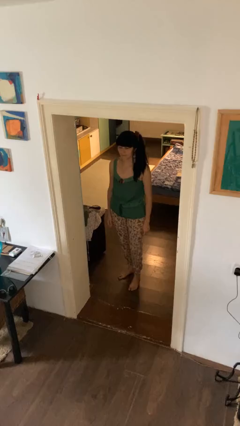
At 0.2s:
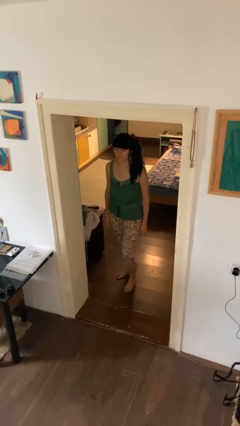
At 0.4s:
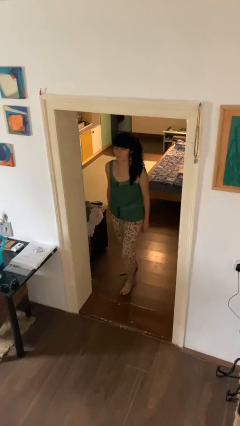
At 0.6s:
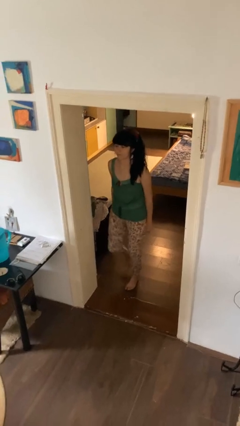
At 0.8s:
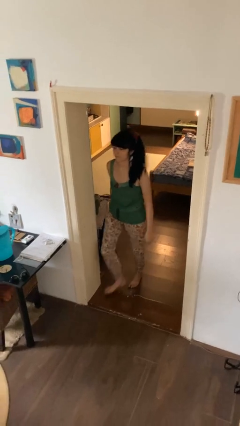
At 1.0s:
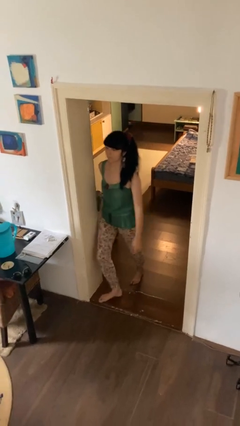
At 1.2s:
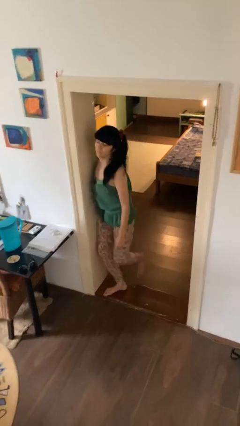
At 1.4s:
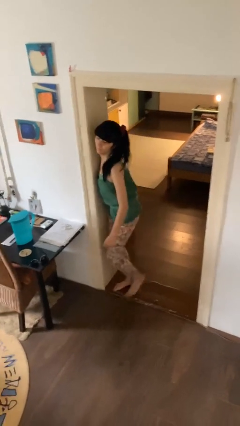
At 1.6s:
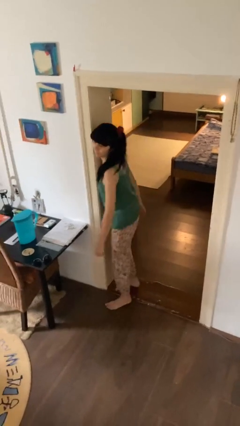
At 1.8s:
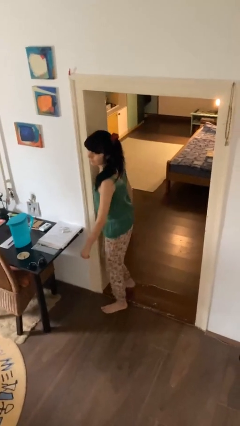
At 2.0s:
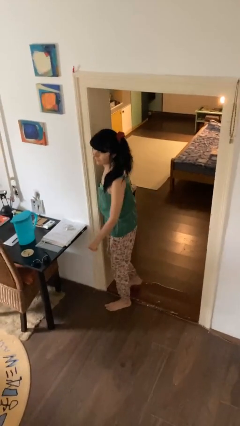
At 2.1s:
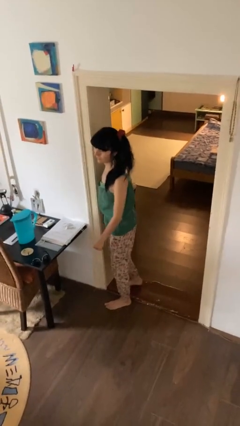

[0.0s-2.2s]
person bumps into wall

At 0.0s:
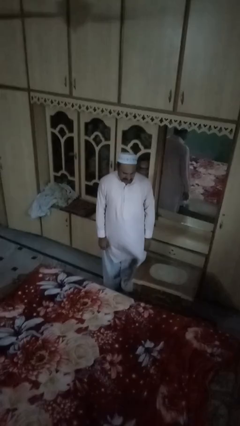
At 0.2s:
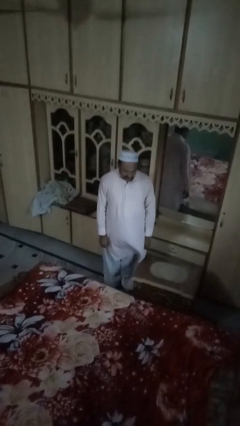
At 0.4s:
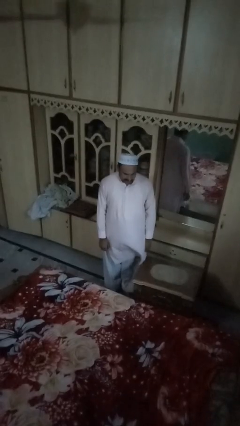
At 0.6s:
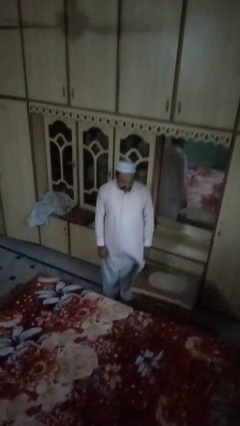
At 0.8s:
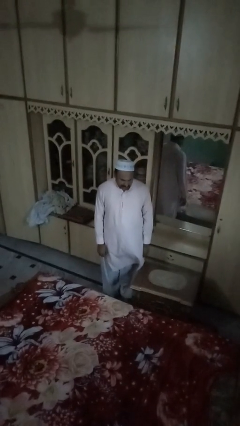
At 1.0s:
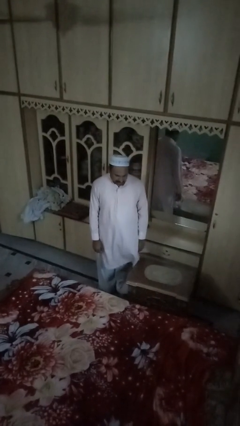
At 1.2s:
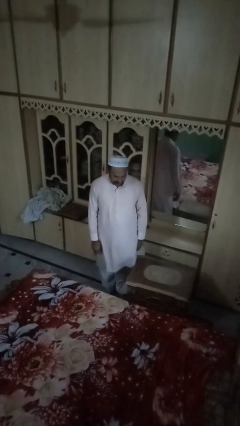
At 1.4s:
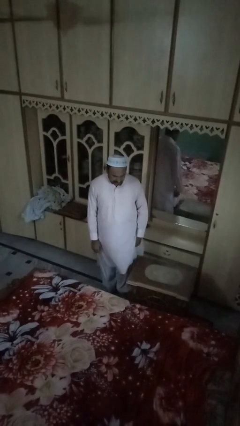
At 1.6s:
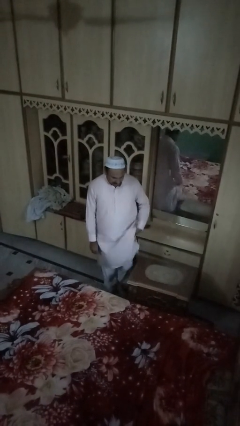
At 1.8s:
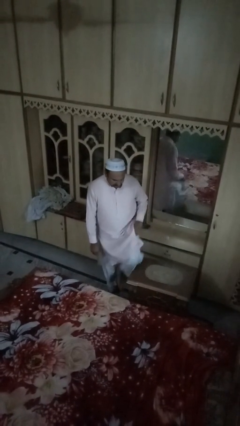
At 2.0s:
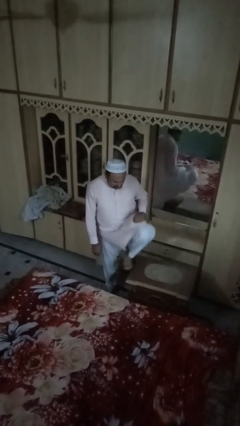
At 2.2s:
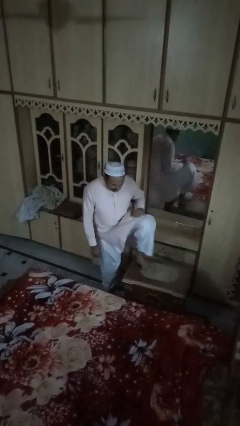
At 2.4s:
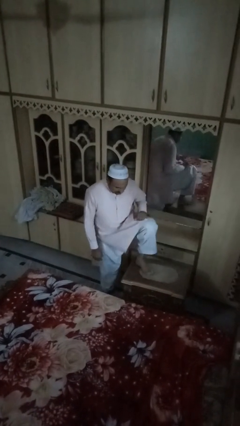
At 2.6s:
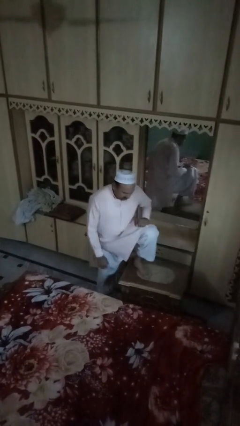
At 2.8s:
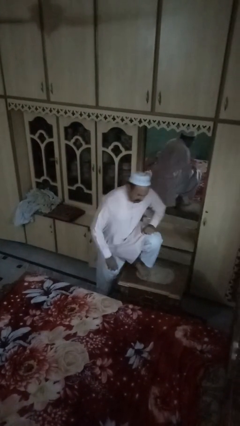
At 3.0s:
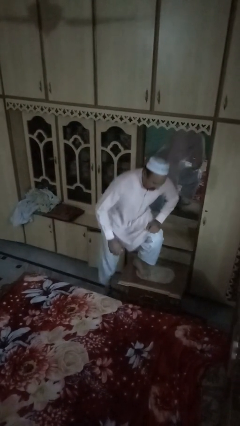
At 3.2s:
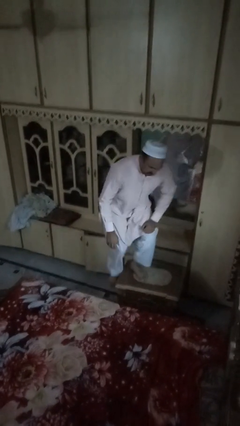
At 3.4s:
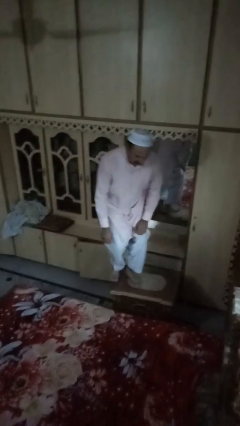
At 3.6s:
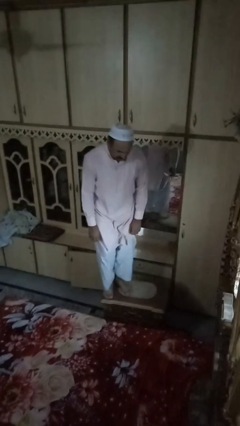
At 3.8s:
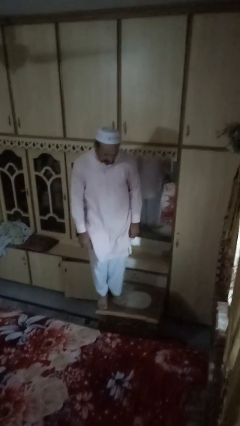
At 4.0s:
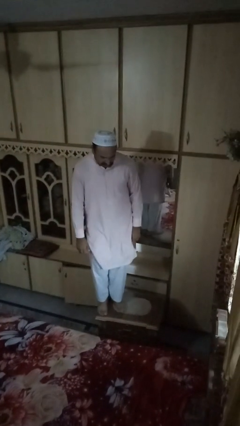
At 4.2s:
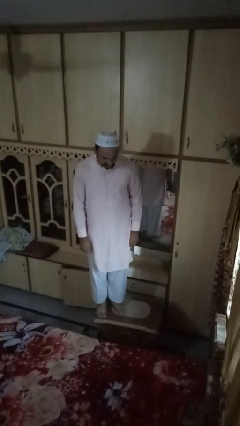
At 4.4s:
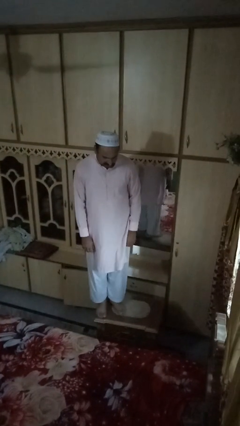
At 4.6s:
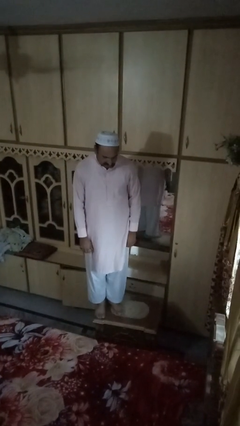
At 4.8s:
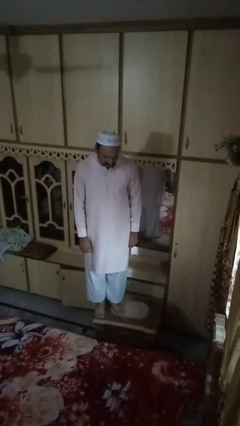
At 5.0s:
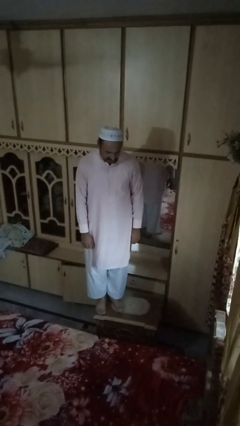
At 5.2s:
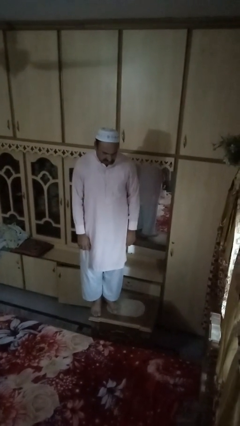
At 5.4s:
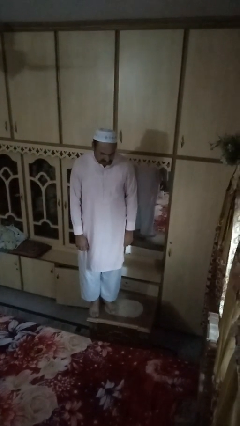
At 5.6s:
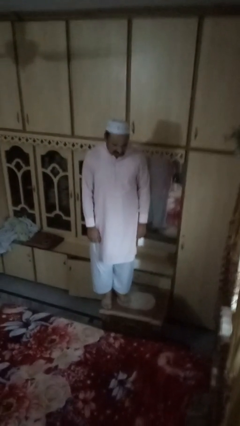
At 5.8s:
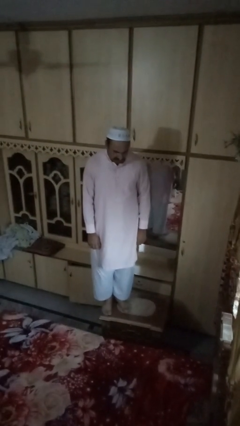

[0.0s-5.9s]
person climbs on table

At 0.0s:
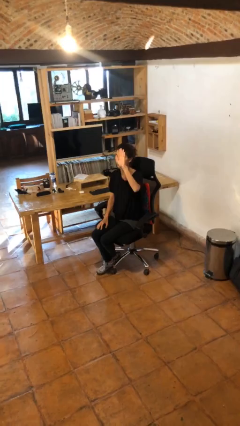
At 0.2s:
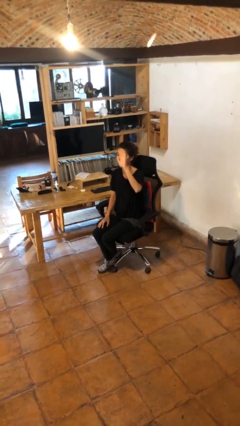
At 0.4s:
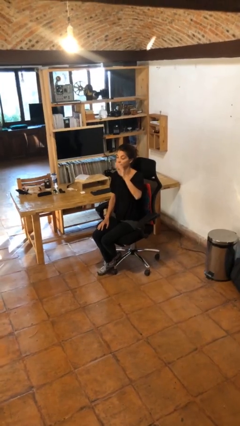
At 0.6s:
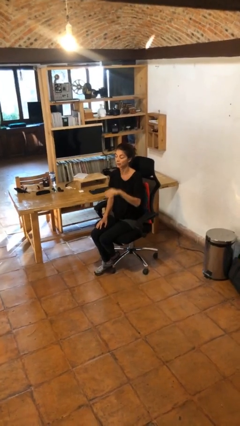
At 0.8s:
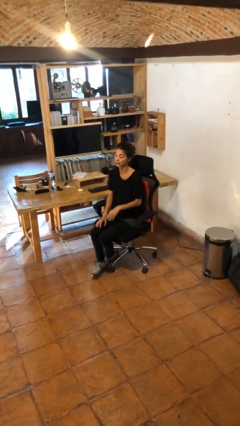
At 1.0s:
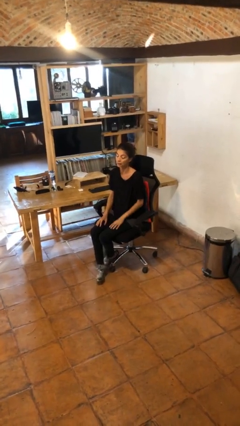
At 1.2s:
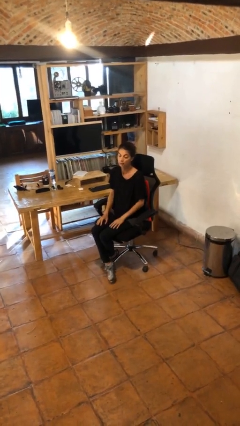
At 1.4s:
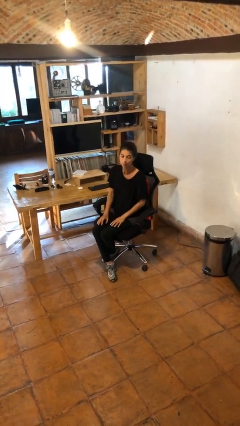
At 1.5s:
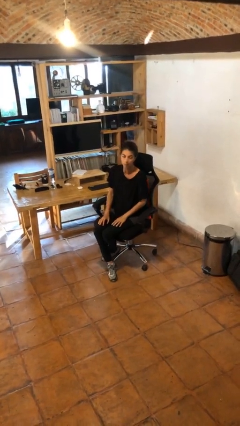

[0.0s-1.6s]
person gestures lower hand

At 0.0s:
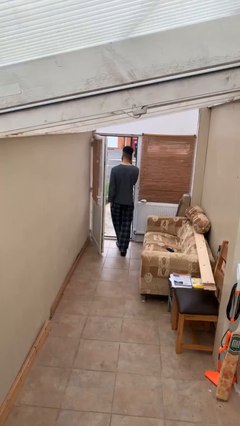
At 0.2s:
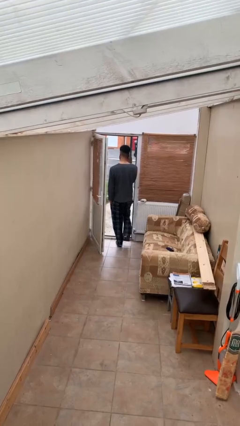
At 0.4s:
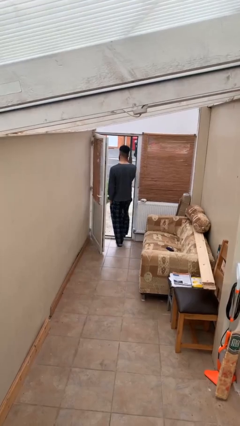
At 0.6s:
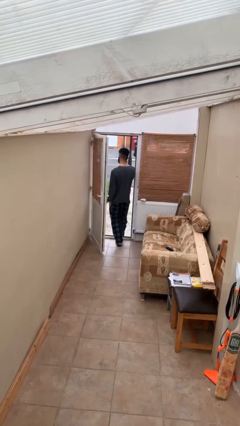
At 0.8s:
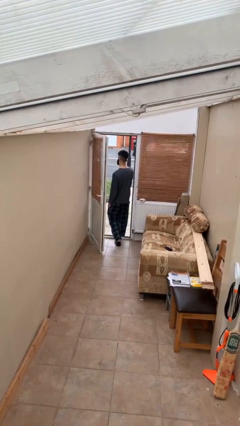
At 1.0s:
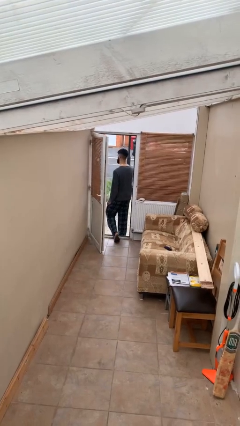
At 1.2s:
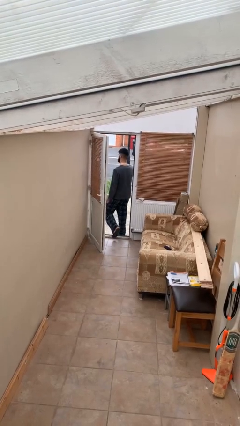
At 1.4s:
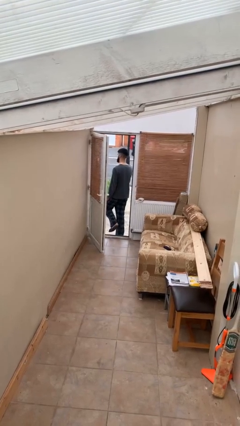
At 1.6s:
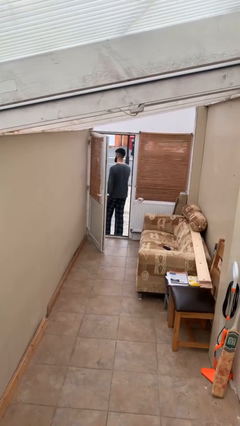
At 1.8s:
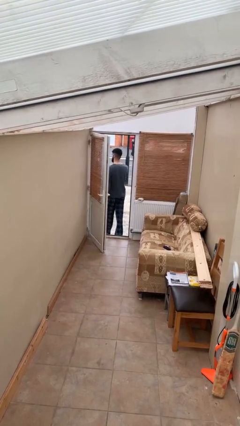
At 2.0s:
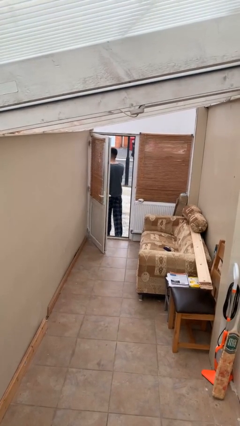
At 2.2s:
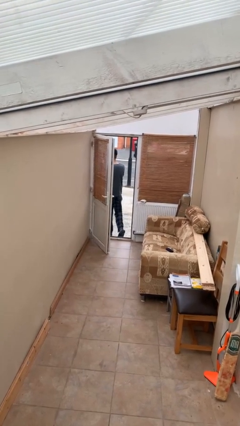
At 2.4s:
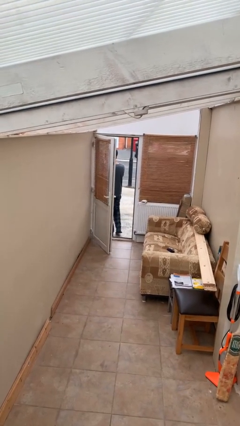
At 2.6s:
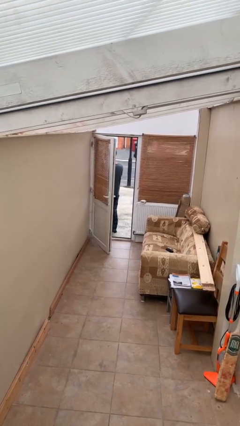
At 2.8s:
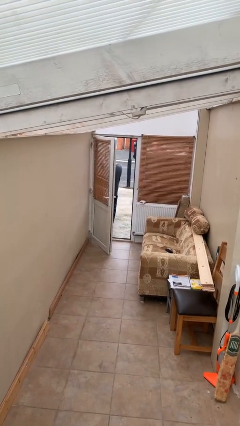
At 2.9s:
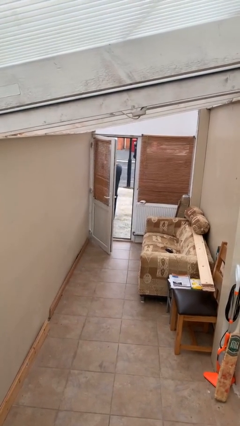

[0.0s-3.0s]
person exits scene through structure

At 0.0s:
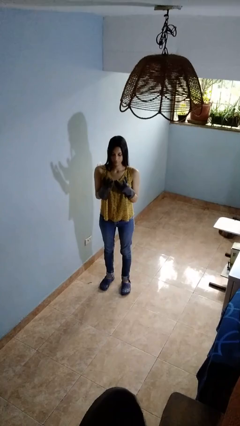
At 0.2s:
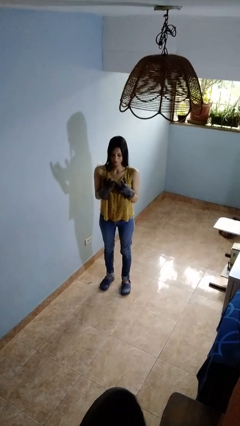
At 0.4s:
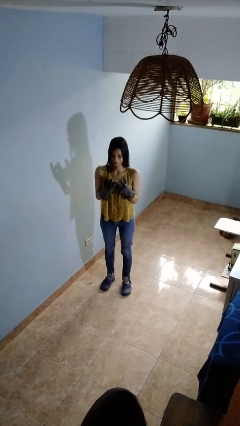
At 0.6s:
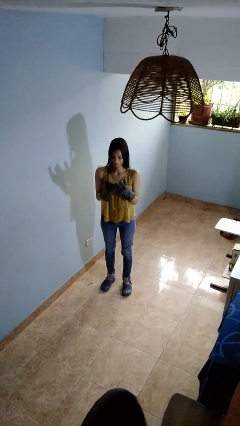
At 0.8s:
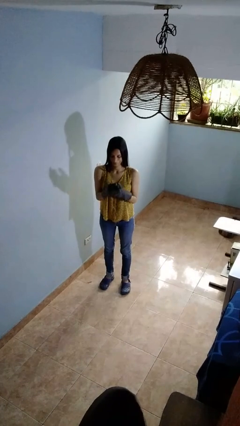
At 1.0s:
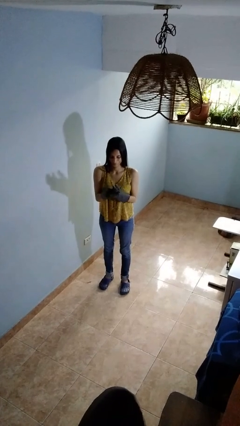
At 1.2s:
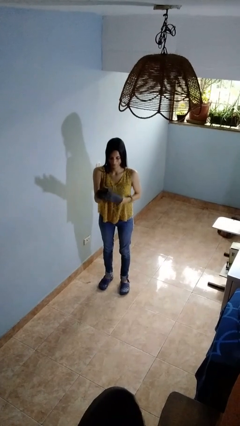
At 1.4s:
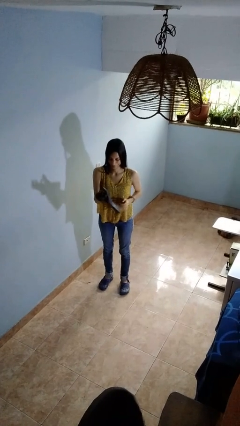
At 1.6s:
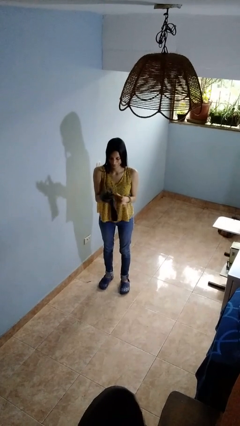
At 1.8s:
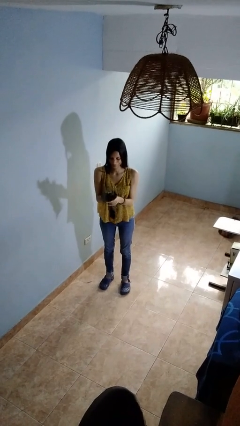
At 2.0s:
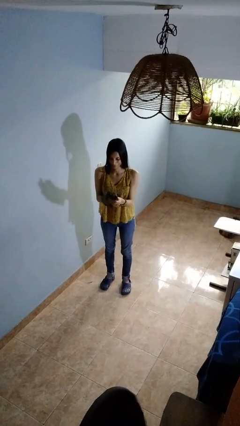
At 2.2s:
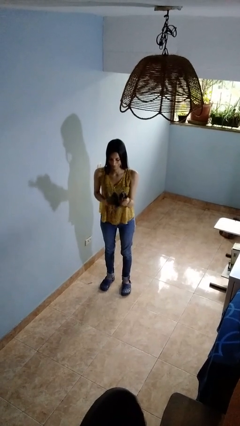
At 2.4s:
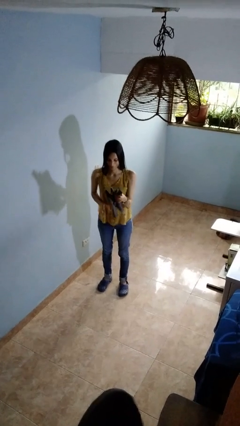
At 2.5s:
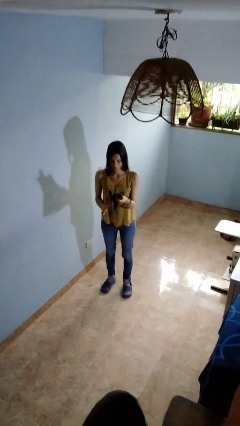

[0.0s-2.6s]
person takes off gloves

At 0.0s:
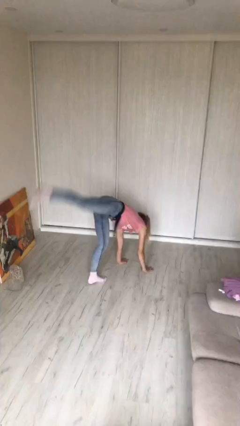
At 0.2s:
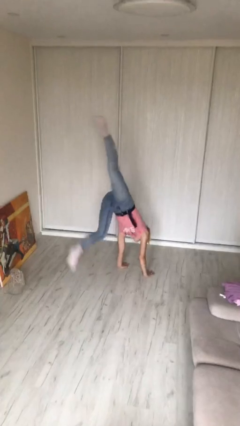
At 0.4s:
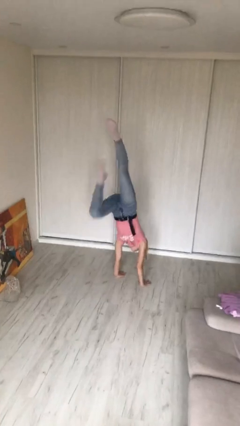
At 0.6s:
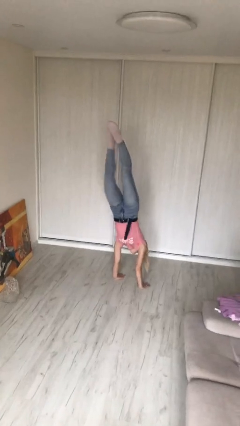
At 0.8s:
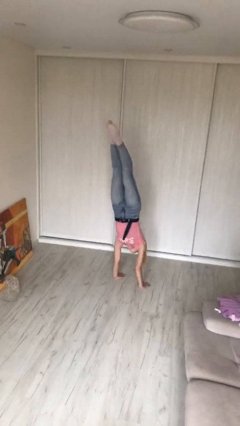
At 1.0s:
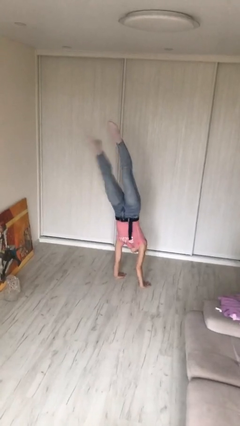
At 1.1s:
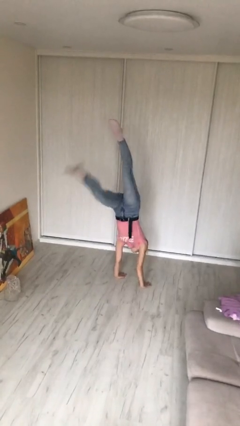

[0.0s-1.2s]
person handstand

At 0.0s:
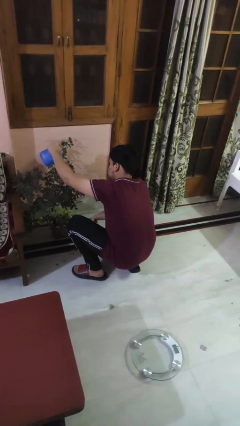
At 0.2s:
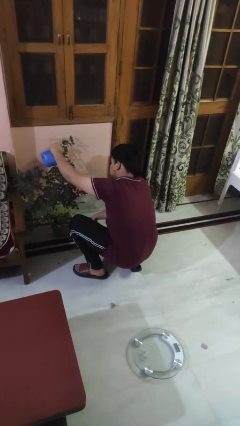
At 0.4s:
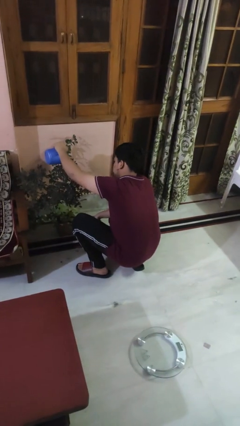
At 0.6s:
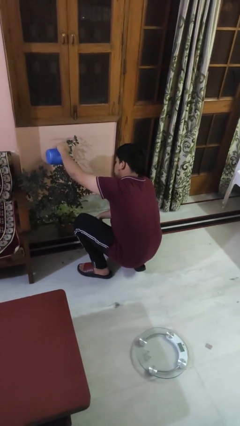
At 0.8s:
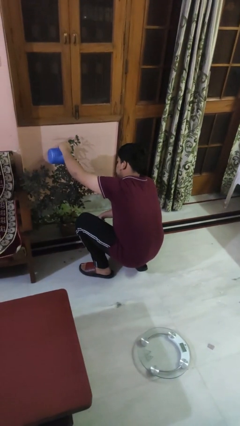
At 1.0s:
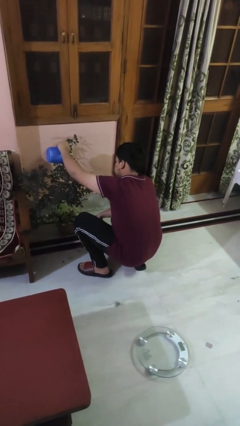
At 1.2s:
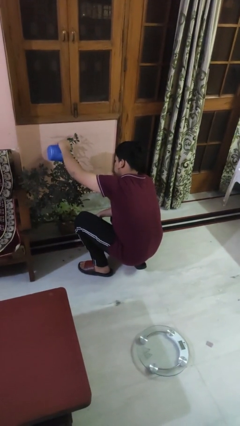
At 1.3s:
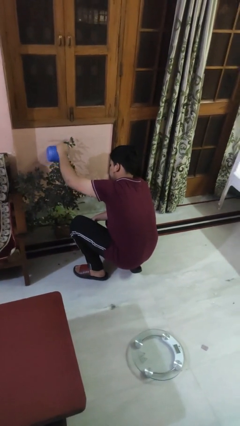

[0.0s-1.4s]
person waters houseplant
